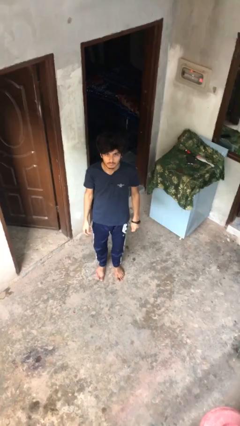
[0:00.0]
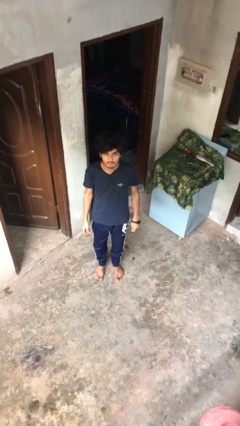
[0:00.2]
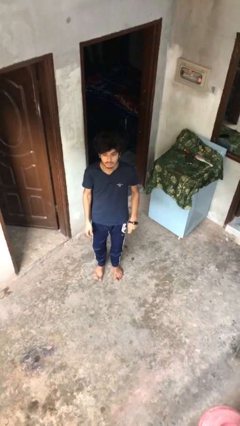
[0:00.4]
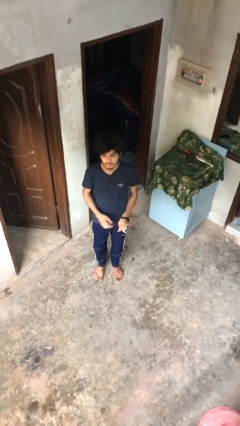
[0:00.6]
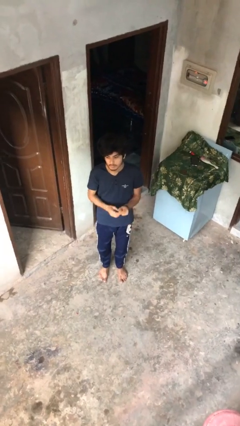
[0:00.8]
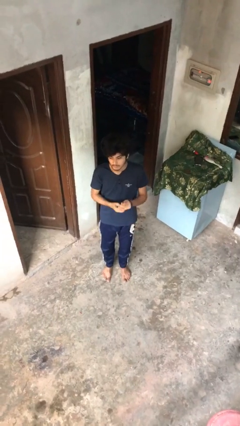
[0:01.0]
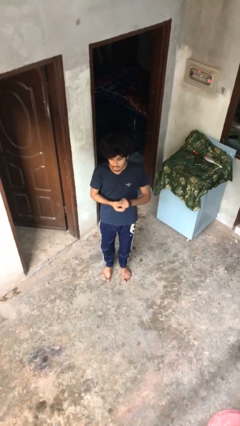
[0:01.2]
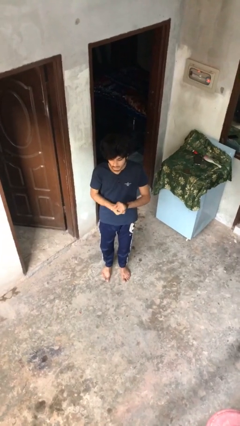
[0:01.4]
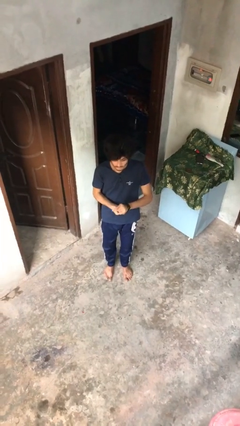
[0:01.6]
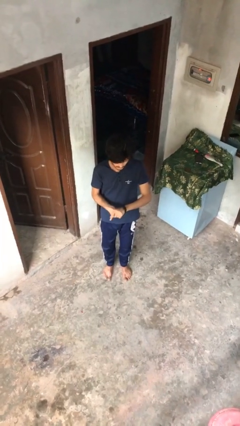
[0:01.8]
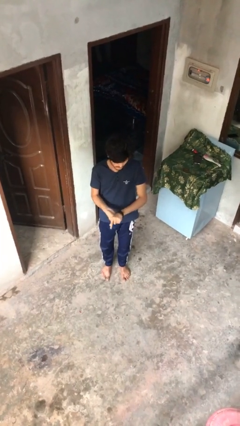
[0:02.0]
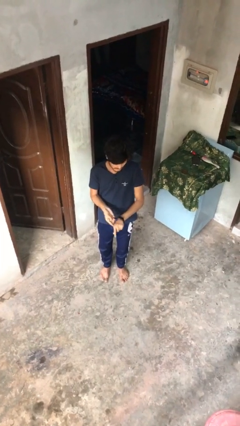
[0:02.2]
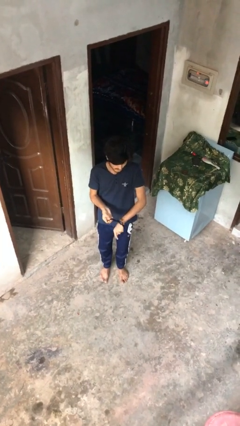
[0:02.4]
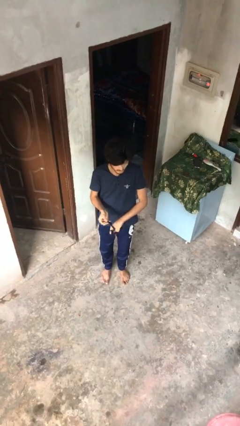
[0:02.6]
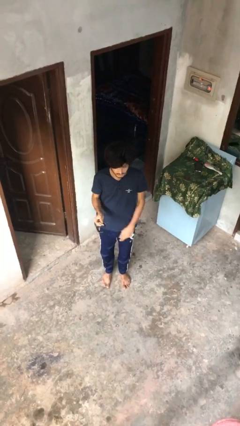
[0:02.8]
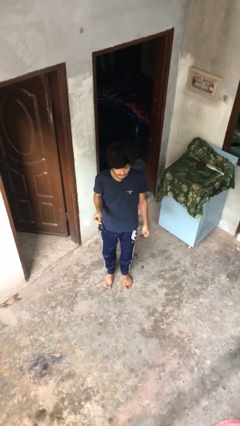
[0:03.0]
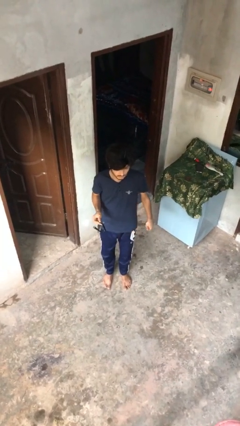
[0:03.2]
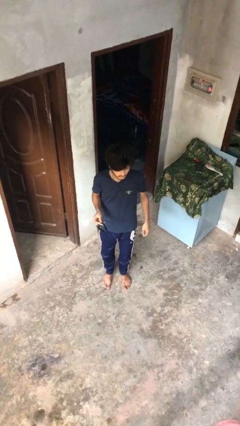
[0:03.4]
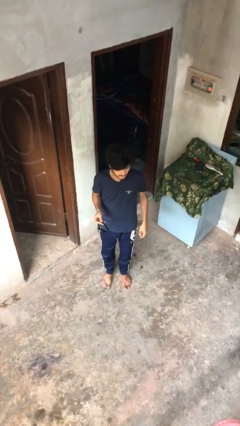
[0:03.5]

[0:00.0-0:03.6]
person takes off wristwatch

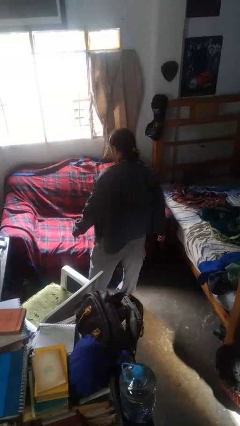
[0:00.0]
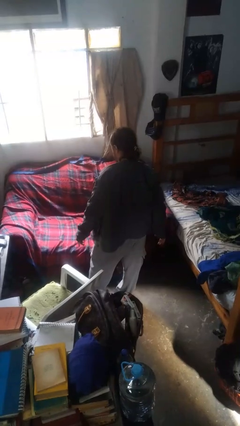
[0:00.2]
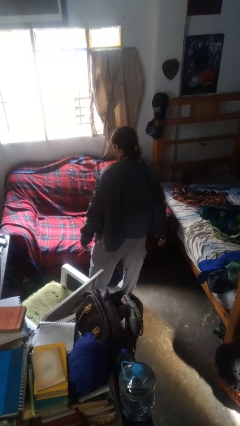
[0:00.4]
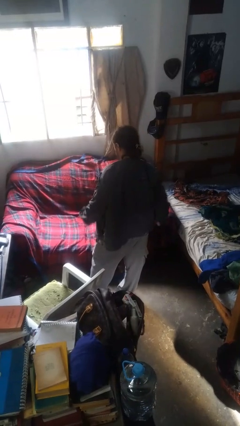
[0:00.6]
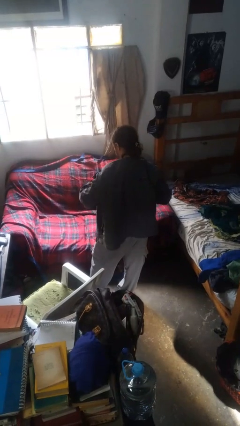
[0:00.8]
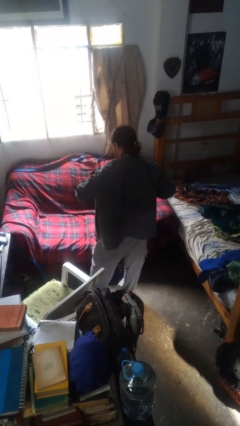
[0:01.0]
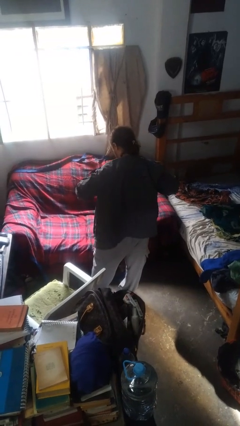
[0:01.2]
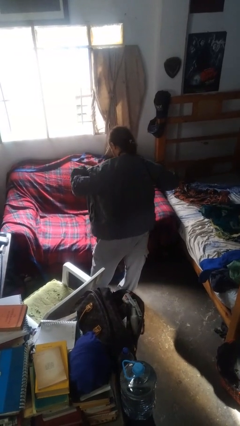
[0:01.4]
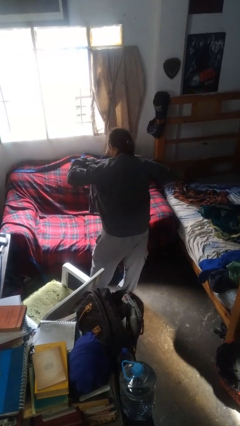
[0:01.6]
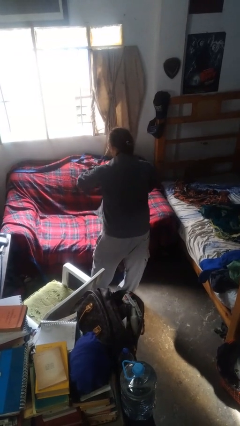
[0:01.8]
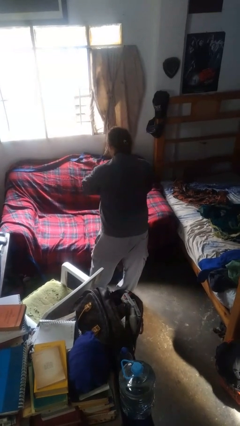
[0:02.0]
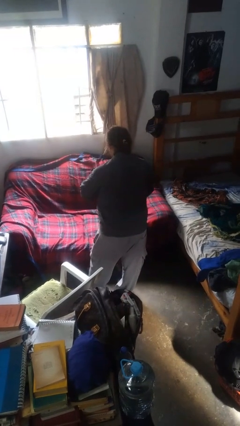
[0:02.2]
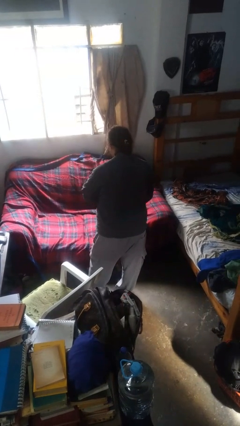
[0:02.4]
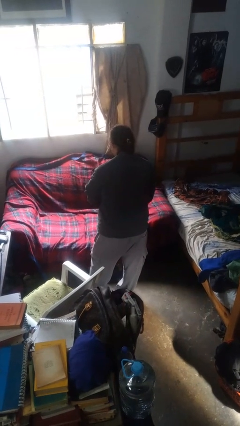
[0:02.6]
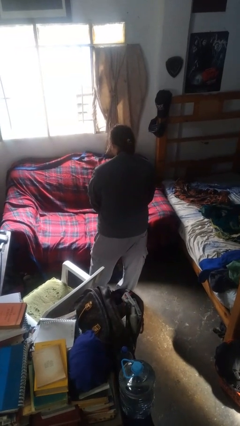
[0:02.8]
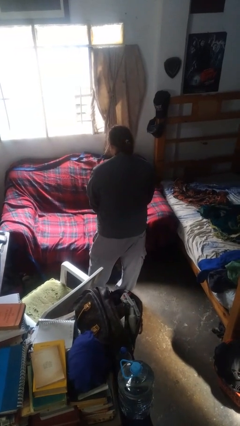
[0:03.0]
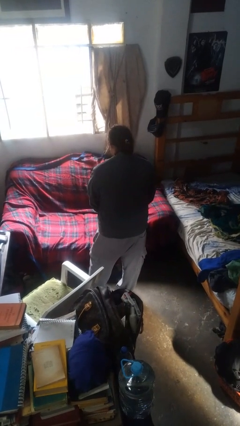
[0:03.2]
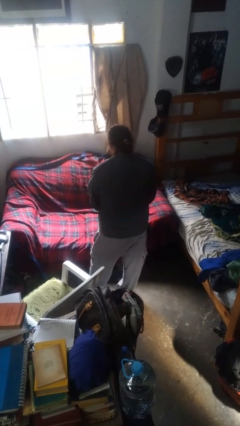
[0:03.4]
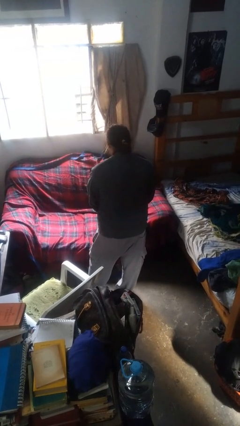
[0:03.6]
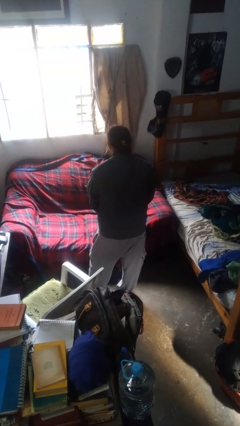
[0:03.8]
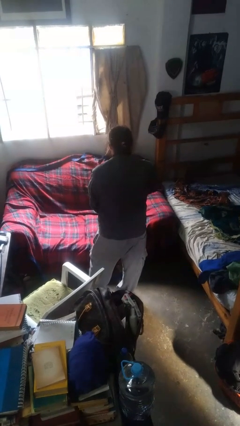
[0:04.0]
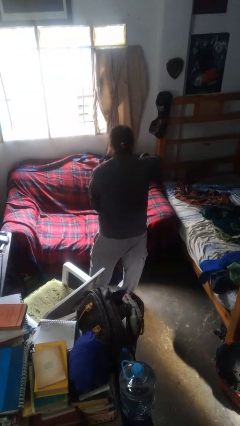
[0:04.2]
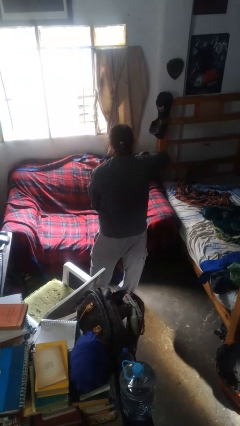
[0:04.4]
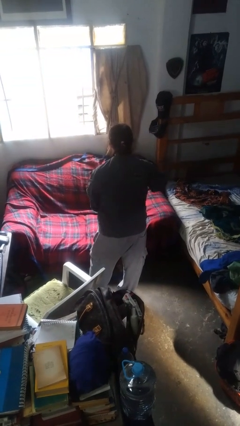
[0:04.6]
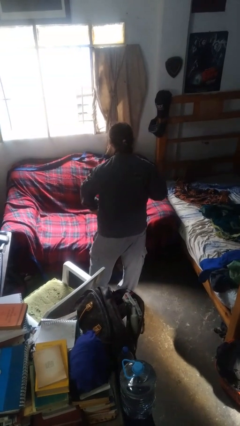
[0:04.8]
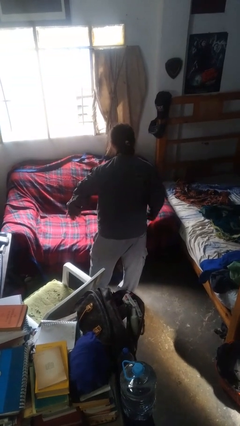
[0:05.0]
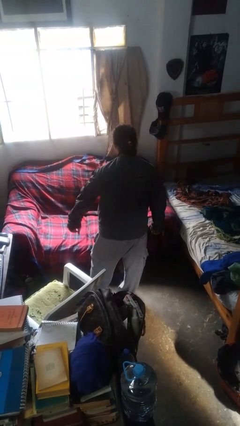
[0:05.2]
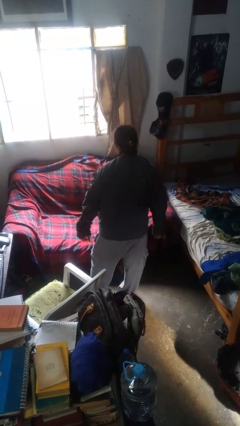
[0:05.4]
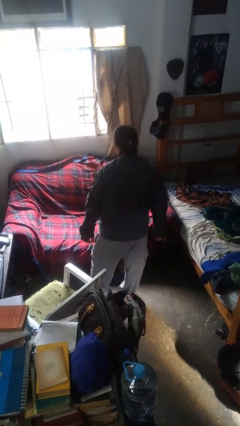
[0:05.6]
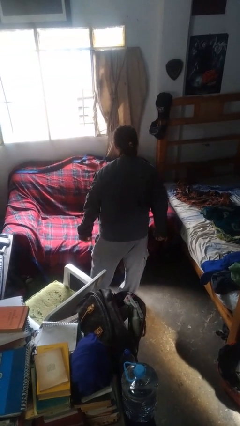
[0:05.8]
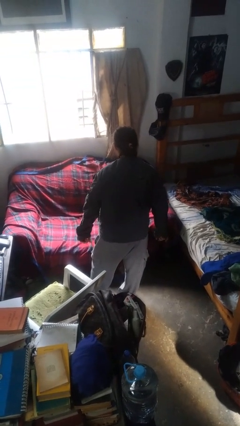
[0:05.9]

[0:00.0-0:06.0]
person zips up jacket

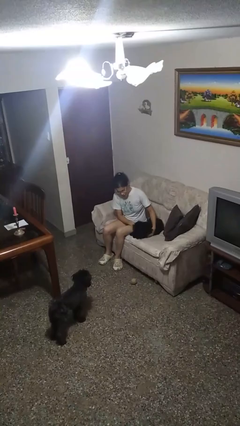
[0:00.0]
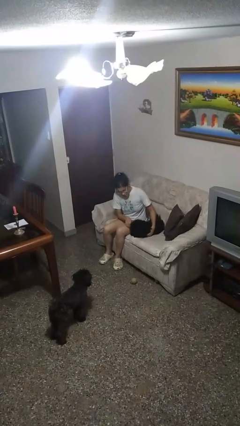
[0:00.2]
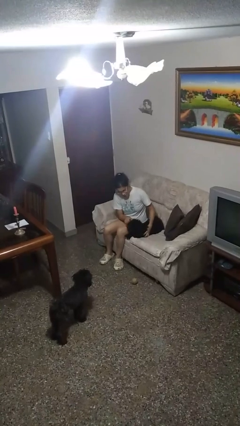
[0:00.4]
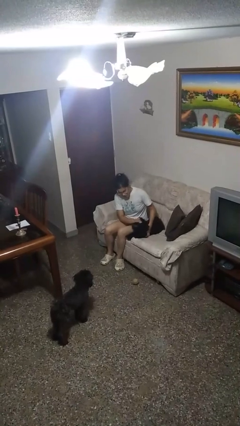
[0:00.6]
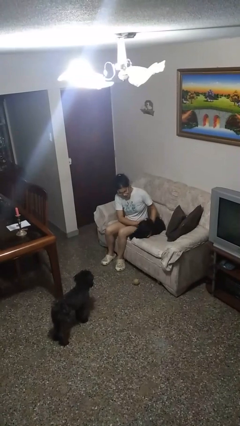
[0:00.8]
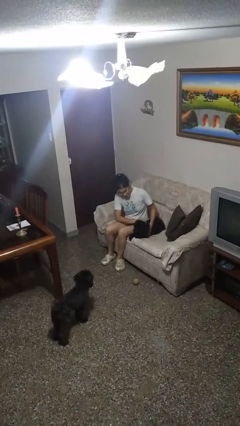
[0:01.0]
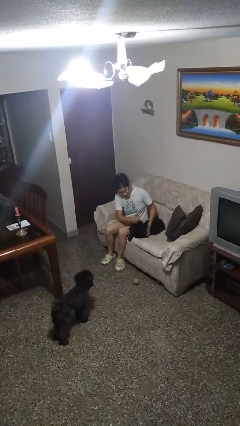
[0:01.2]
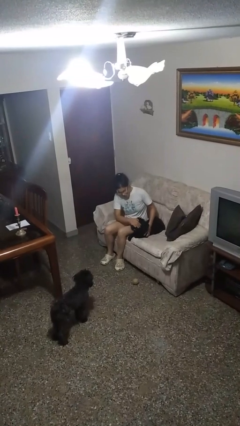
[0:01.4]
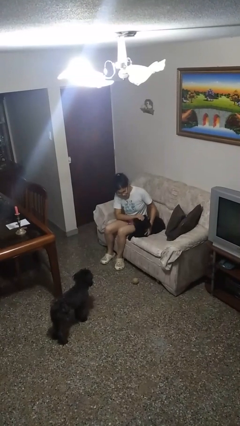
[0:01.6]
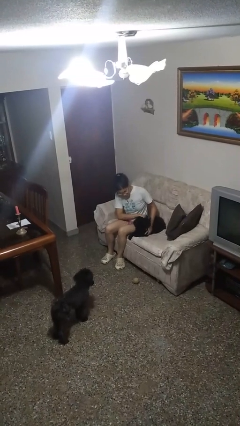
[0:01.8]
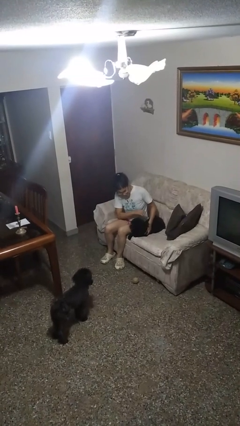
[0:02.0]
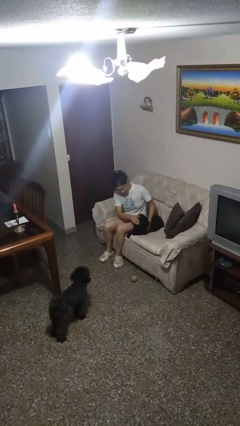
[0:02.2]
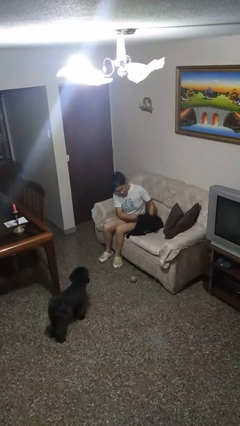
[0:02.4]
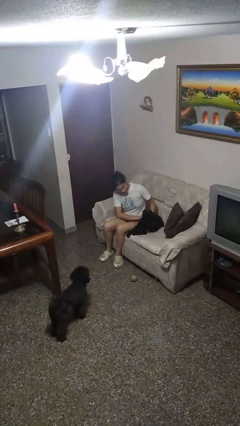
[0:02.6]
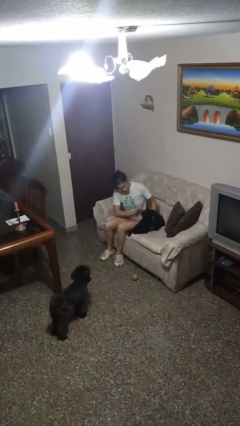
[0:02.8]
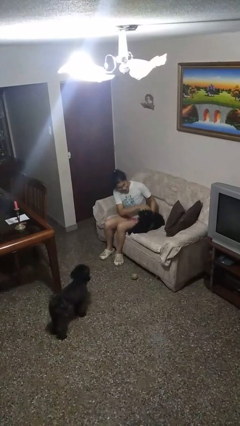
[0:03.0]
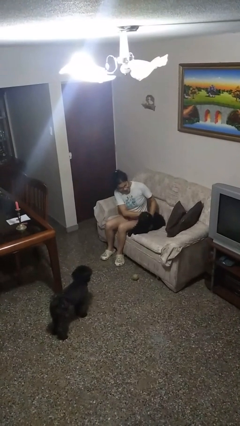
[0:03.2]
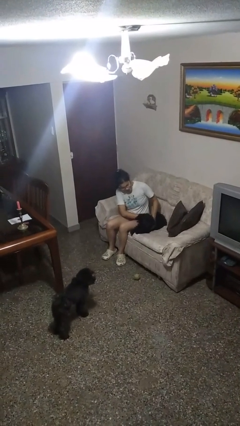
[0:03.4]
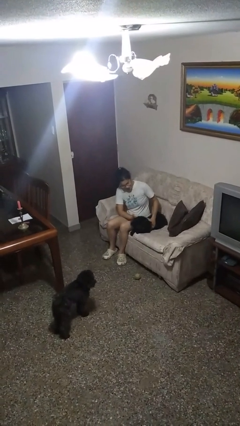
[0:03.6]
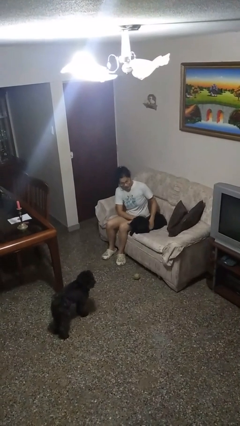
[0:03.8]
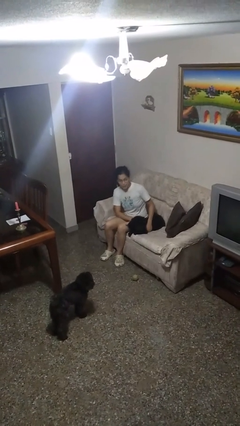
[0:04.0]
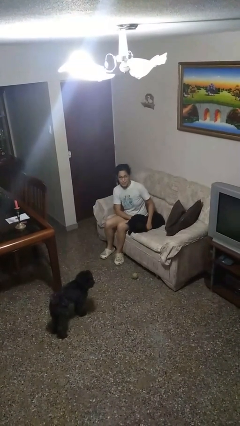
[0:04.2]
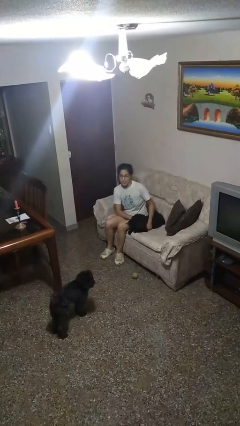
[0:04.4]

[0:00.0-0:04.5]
person pets dog

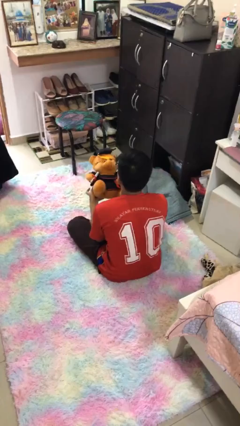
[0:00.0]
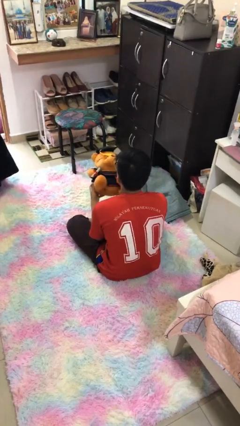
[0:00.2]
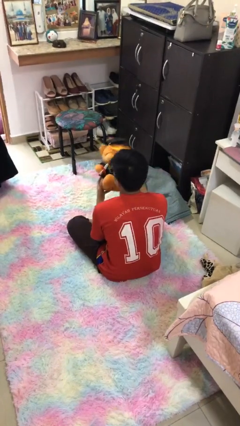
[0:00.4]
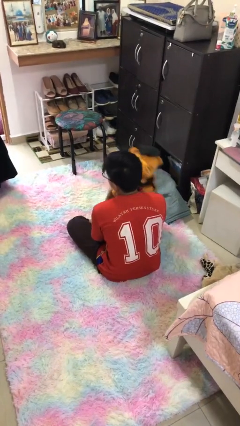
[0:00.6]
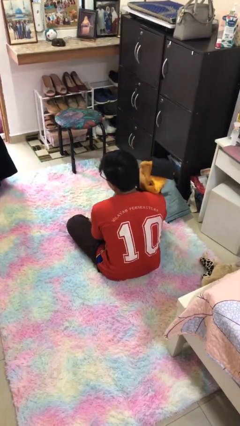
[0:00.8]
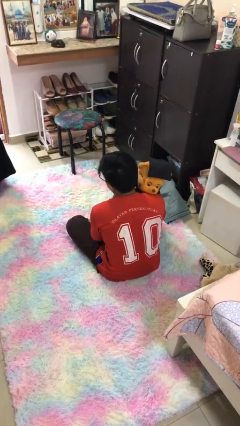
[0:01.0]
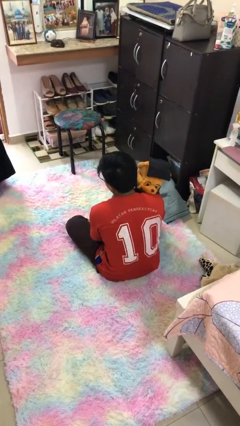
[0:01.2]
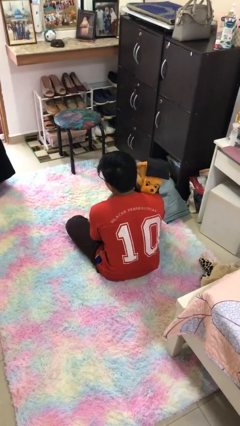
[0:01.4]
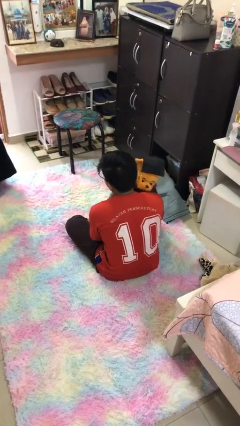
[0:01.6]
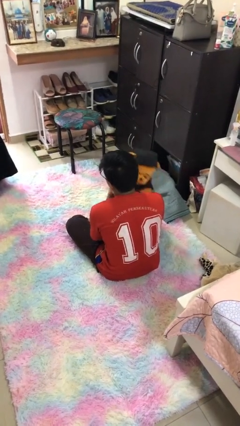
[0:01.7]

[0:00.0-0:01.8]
person hugs stuffed animal

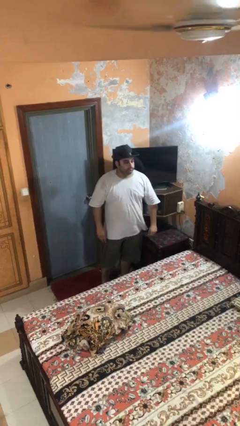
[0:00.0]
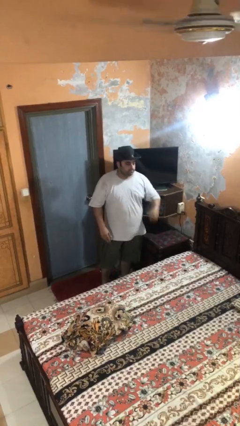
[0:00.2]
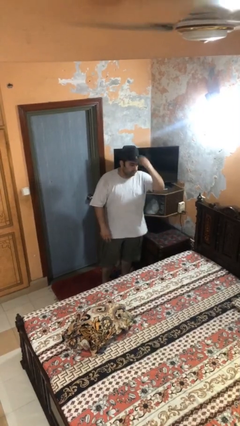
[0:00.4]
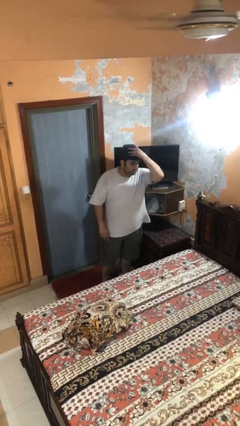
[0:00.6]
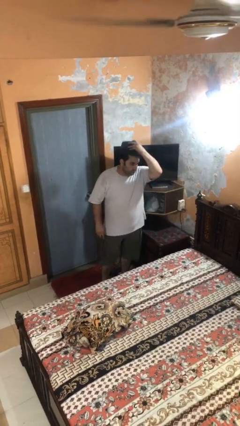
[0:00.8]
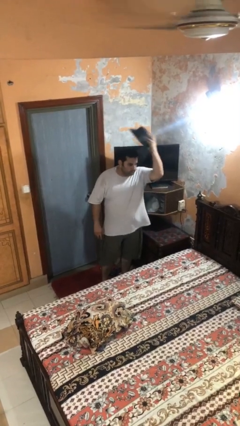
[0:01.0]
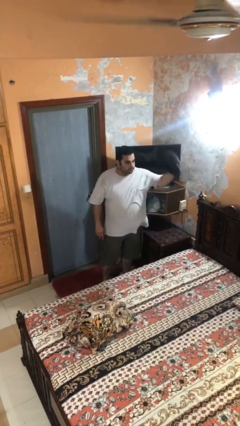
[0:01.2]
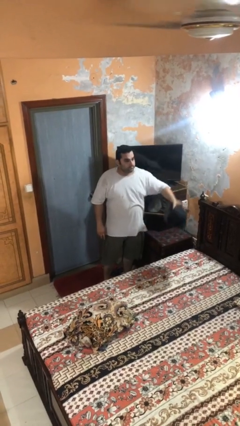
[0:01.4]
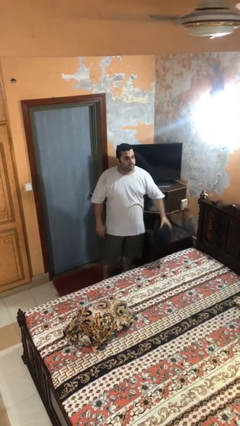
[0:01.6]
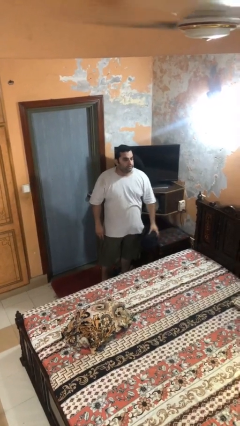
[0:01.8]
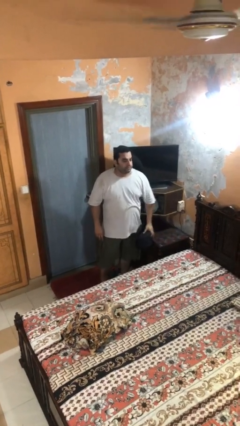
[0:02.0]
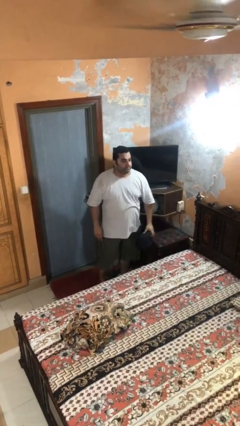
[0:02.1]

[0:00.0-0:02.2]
person takes off hat
